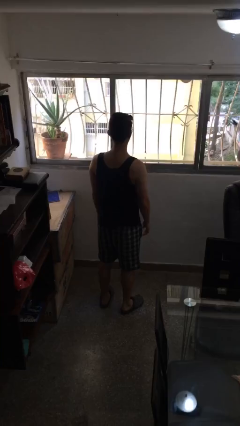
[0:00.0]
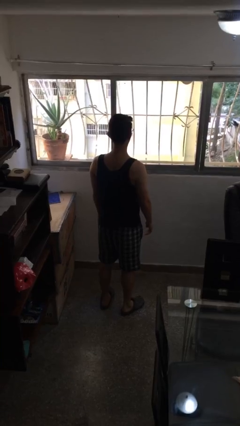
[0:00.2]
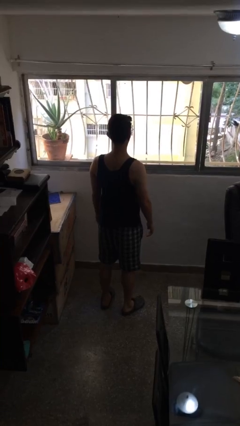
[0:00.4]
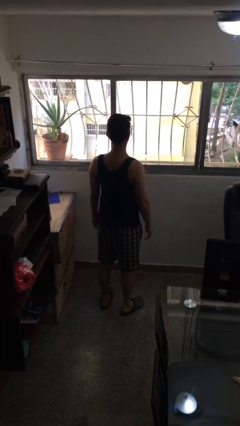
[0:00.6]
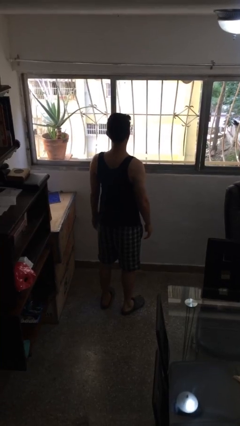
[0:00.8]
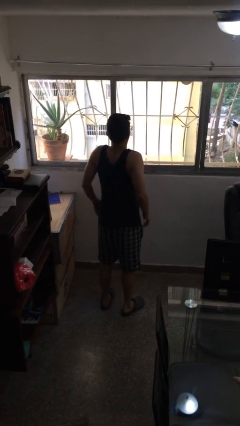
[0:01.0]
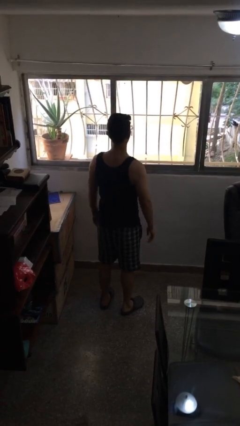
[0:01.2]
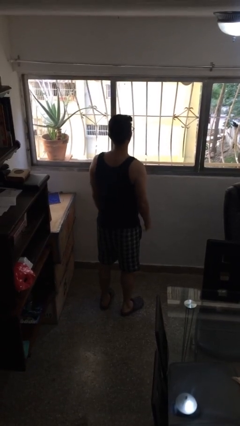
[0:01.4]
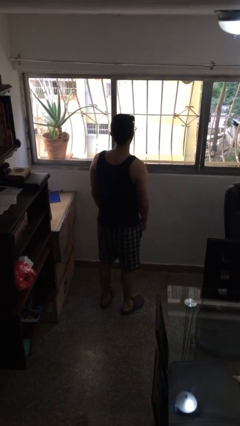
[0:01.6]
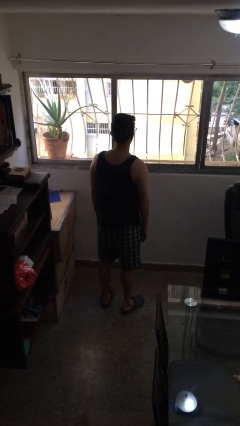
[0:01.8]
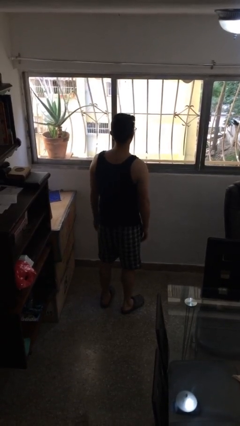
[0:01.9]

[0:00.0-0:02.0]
person shrugs

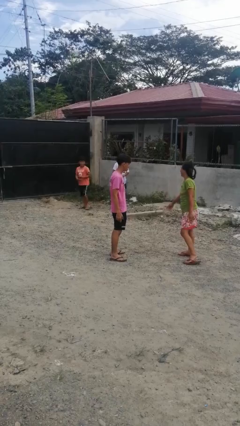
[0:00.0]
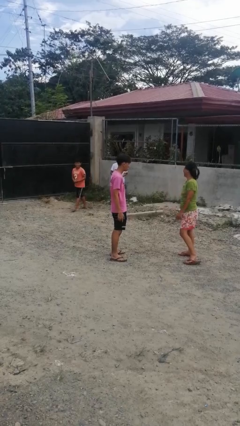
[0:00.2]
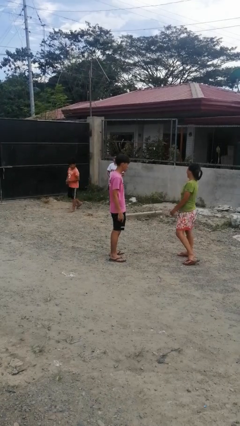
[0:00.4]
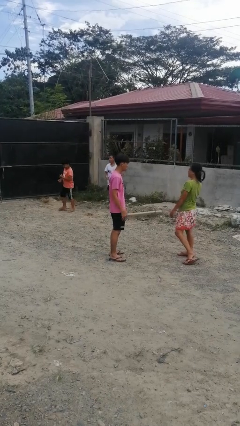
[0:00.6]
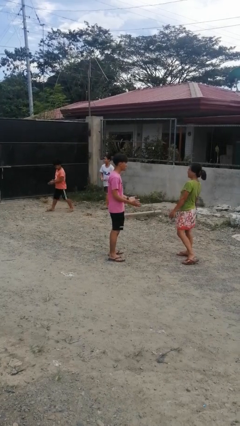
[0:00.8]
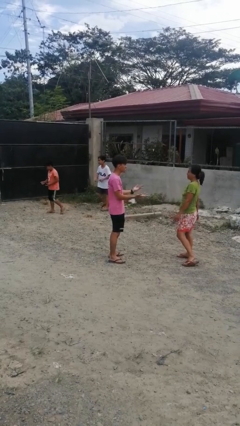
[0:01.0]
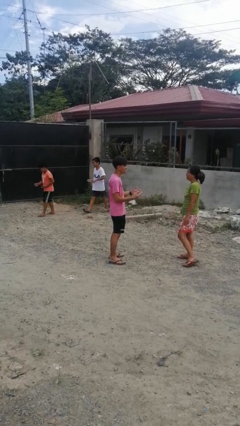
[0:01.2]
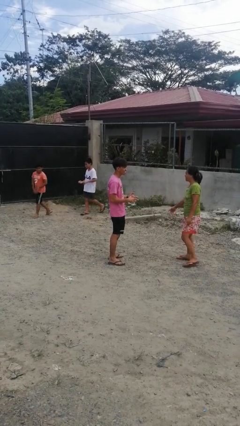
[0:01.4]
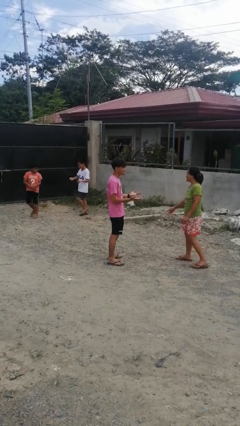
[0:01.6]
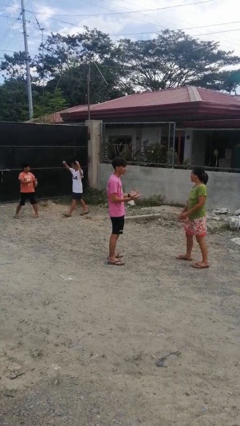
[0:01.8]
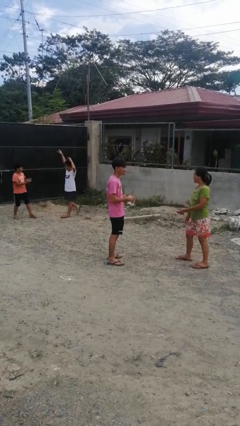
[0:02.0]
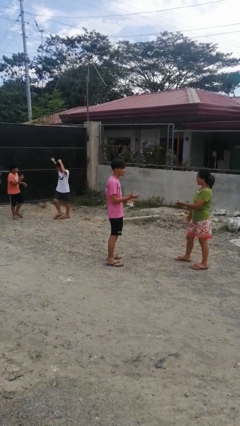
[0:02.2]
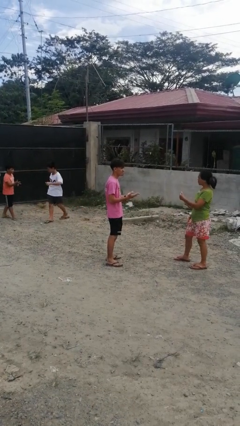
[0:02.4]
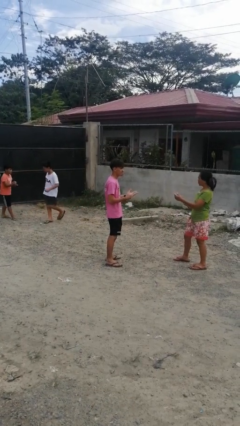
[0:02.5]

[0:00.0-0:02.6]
person talks to person

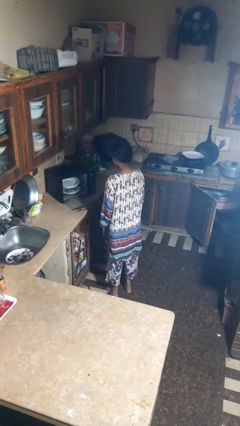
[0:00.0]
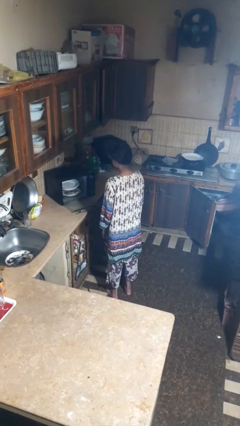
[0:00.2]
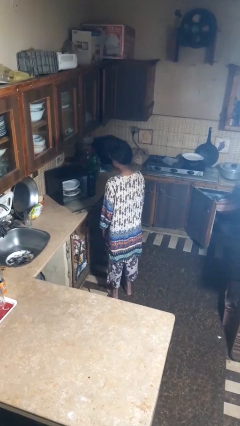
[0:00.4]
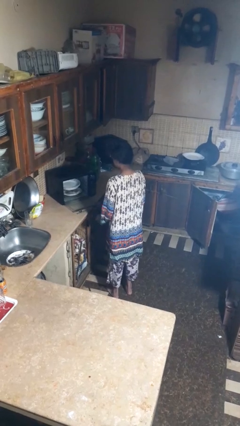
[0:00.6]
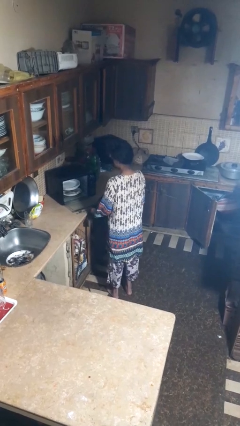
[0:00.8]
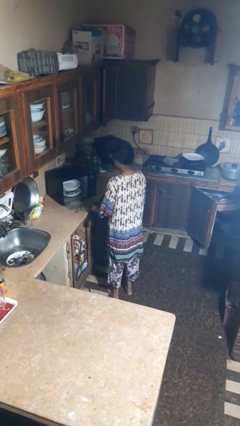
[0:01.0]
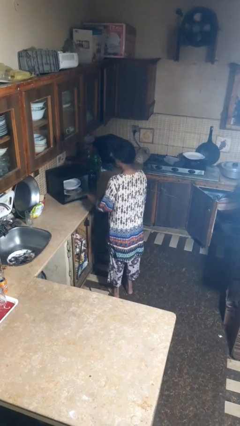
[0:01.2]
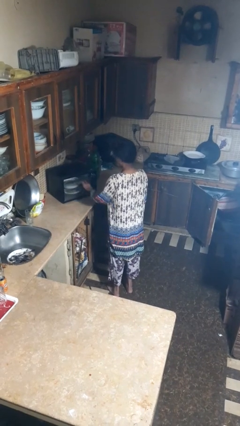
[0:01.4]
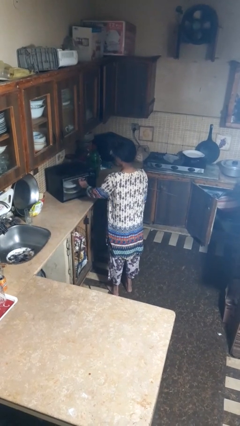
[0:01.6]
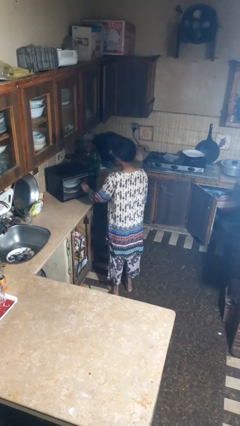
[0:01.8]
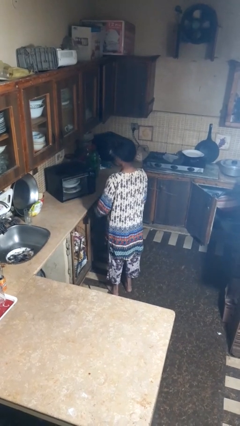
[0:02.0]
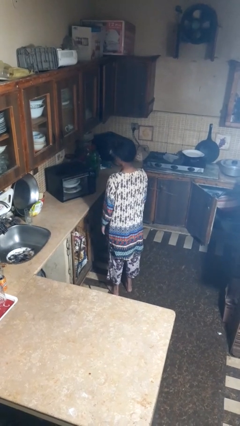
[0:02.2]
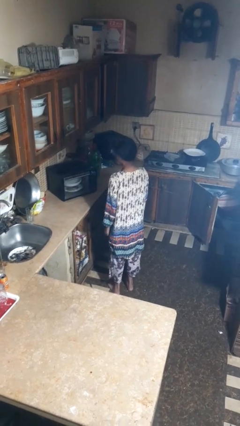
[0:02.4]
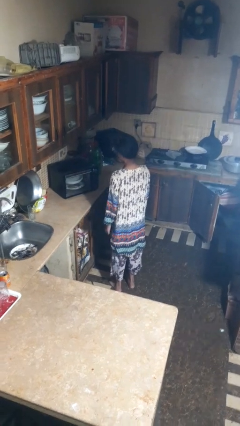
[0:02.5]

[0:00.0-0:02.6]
person closes dishwasher

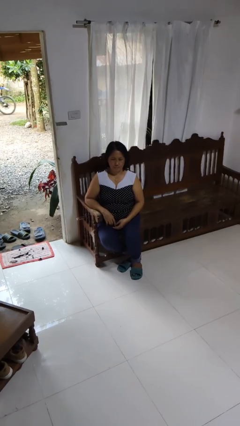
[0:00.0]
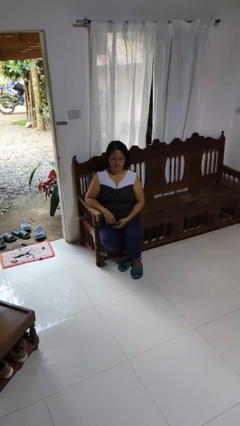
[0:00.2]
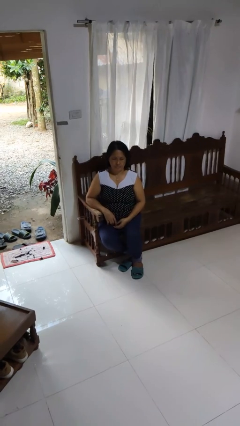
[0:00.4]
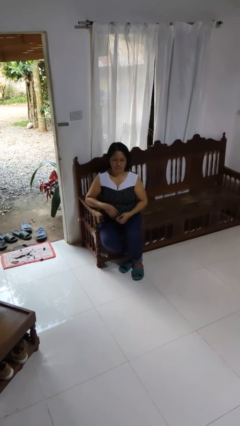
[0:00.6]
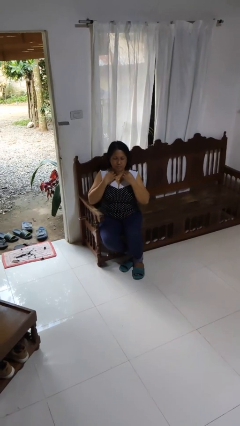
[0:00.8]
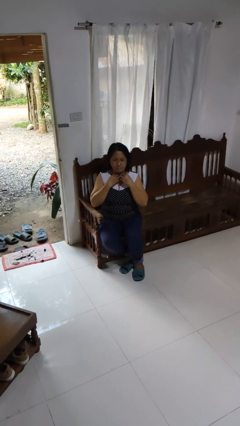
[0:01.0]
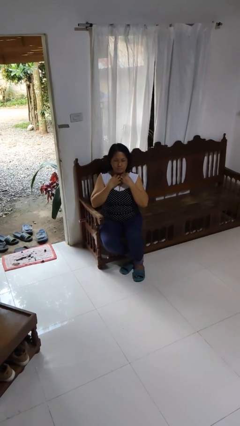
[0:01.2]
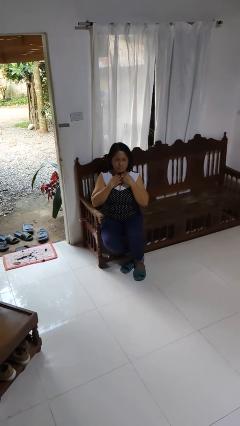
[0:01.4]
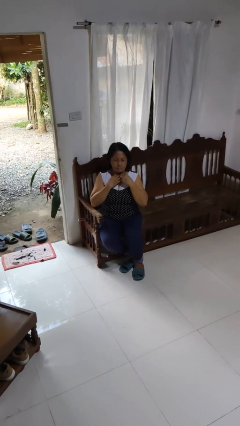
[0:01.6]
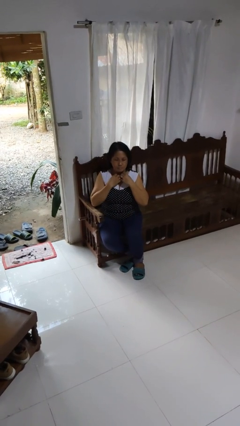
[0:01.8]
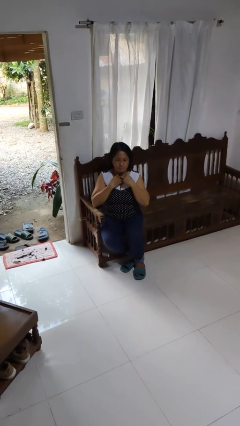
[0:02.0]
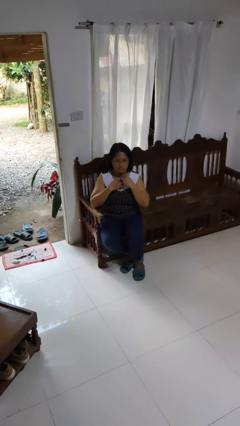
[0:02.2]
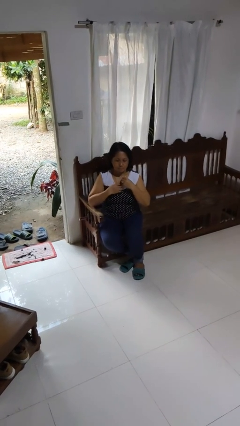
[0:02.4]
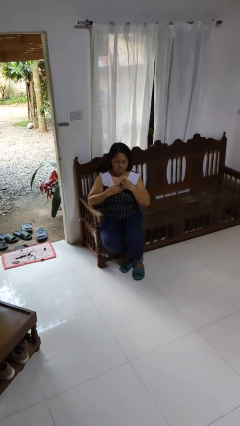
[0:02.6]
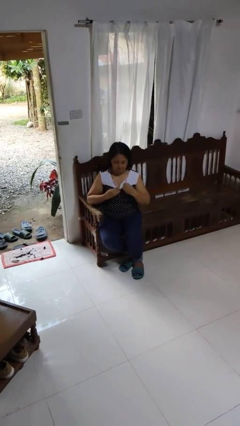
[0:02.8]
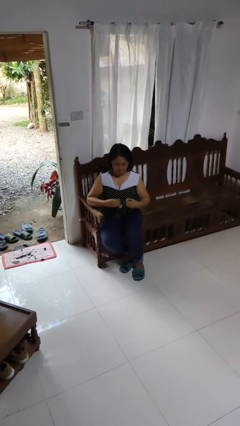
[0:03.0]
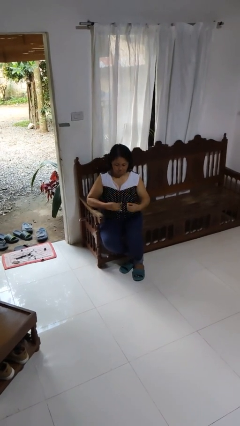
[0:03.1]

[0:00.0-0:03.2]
person takes off necklace

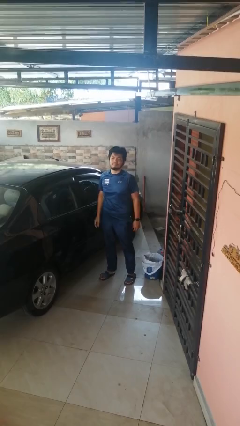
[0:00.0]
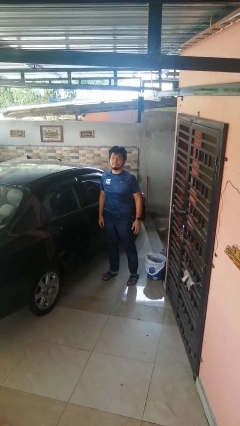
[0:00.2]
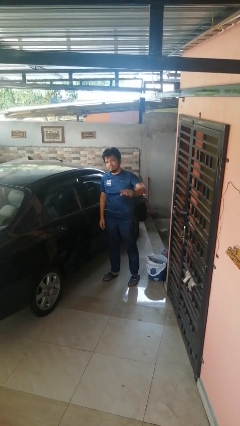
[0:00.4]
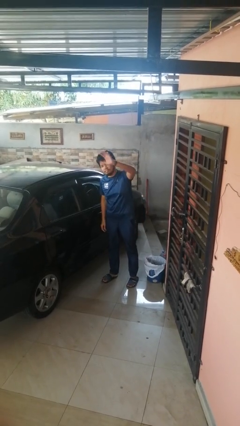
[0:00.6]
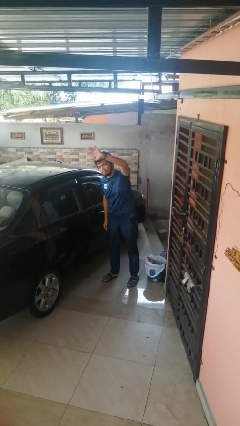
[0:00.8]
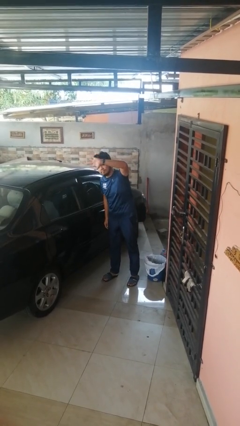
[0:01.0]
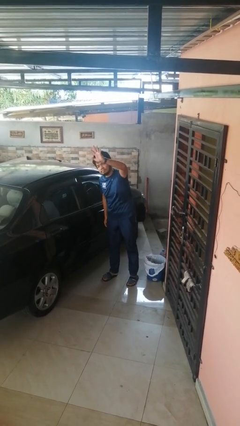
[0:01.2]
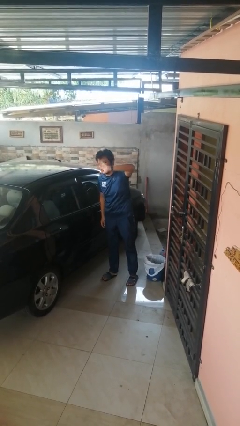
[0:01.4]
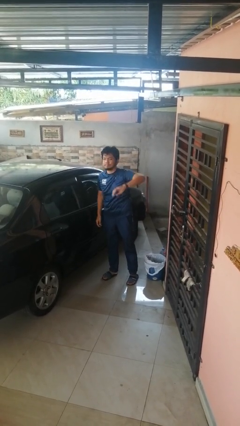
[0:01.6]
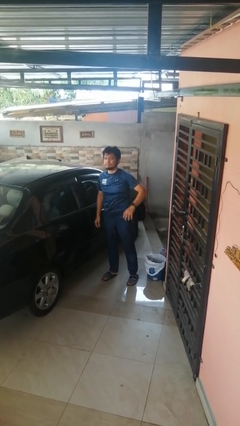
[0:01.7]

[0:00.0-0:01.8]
person waves at person

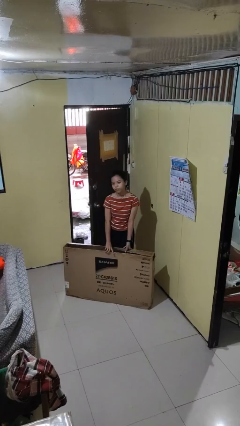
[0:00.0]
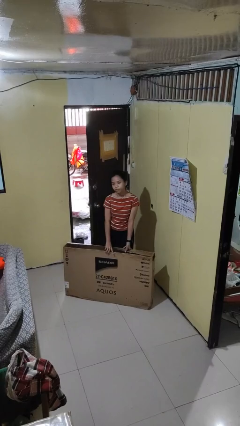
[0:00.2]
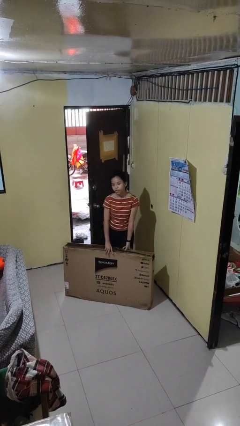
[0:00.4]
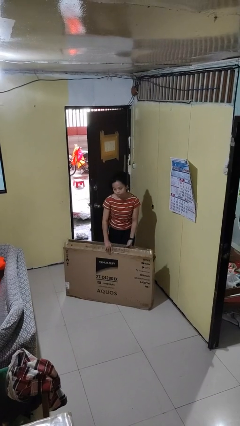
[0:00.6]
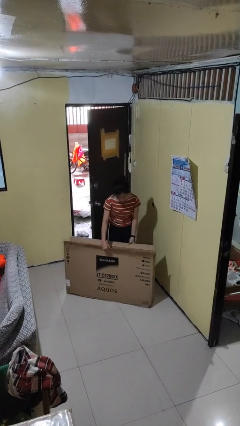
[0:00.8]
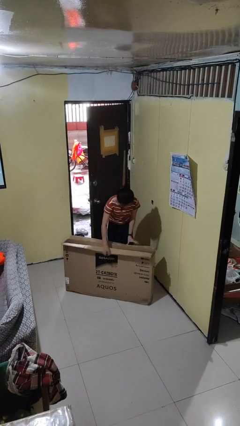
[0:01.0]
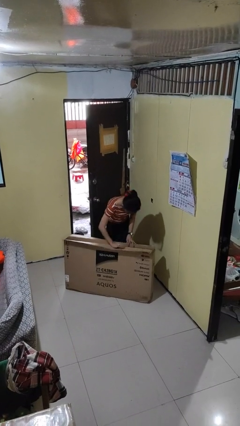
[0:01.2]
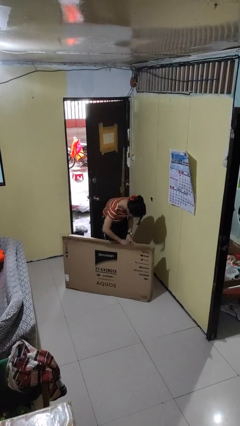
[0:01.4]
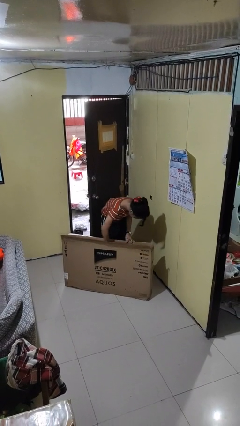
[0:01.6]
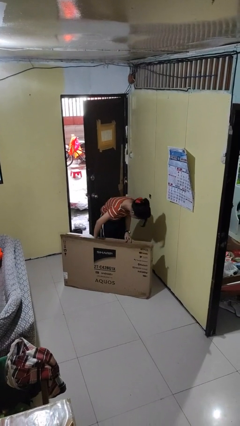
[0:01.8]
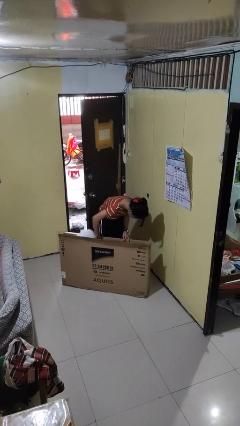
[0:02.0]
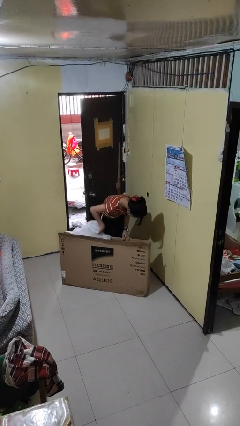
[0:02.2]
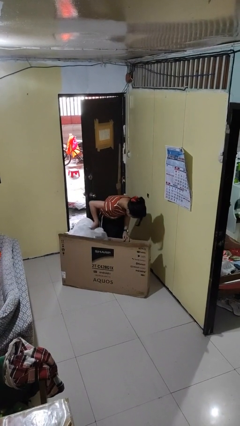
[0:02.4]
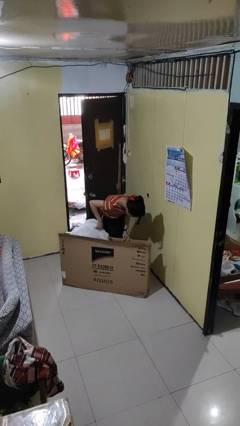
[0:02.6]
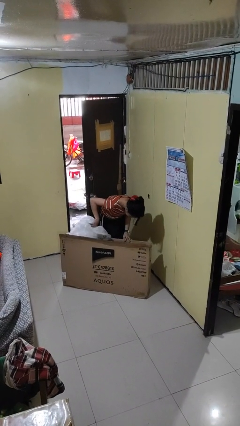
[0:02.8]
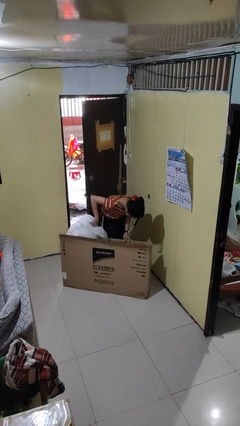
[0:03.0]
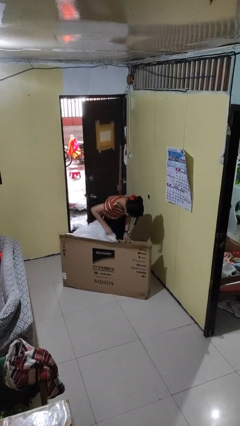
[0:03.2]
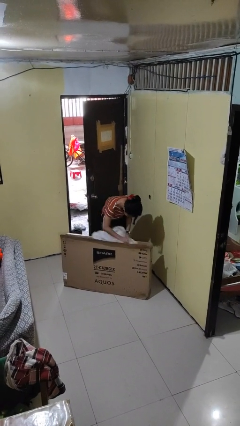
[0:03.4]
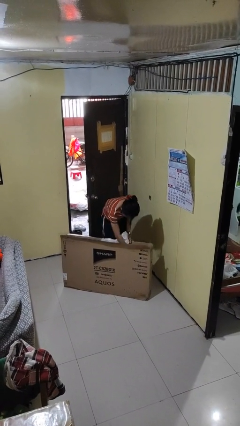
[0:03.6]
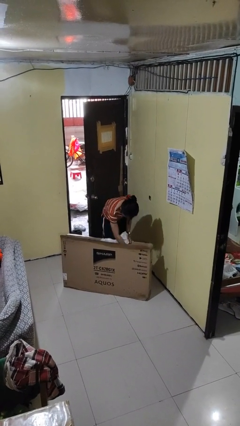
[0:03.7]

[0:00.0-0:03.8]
person searches in box

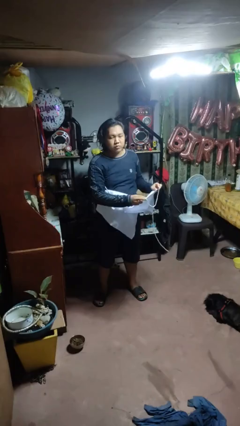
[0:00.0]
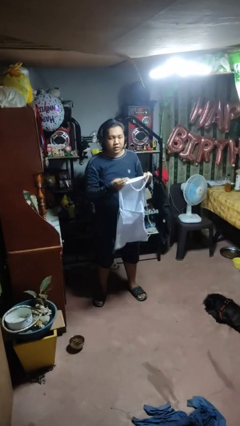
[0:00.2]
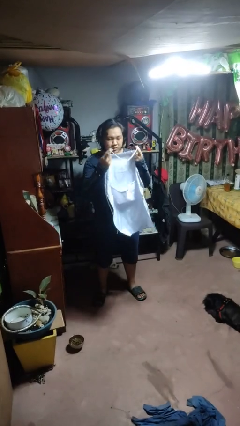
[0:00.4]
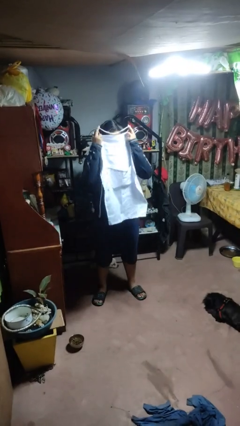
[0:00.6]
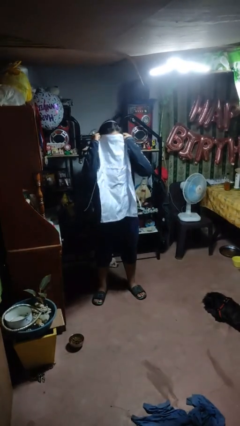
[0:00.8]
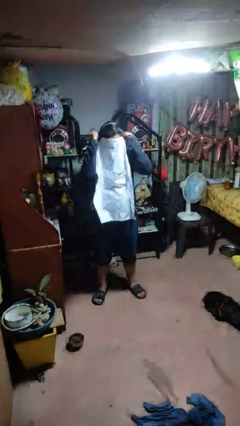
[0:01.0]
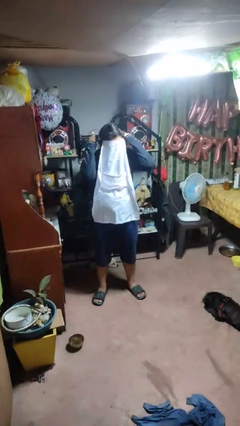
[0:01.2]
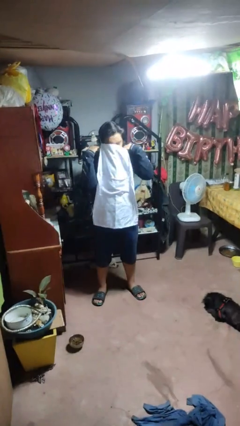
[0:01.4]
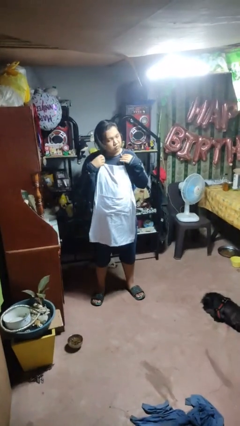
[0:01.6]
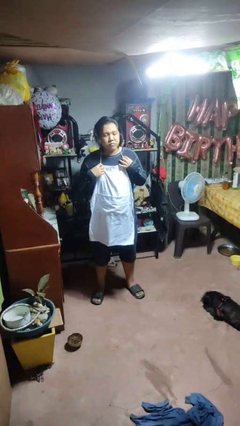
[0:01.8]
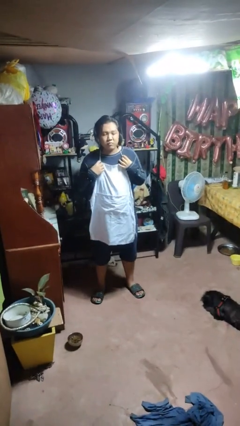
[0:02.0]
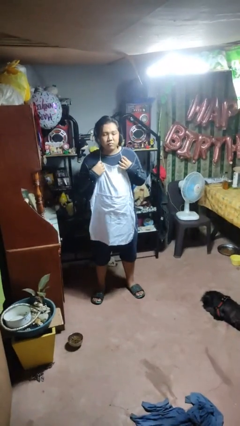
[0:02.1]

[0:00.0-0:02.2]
person puts on apron
